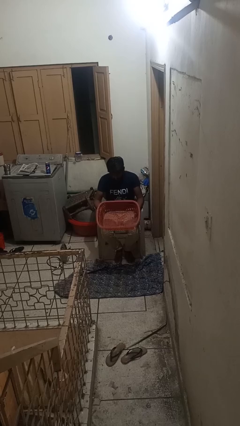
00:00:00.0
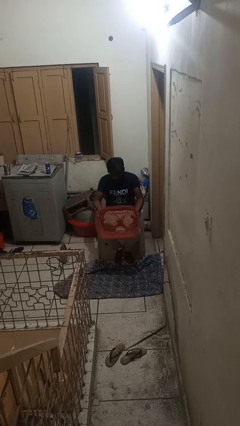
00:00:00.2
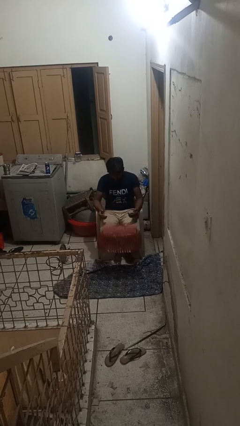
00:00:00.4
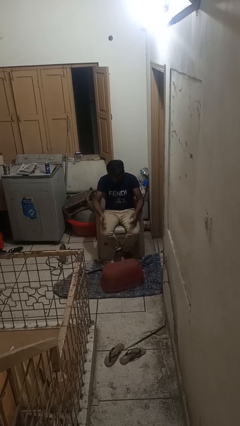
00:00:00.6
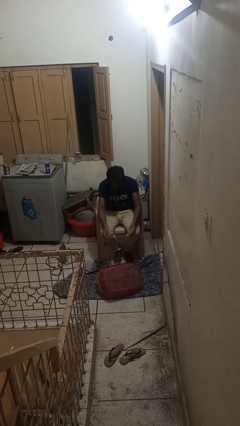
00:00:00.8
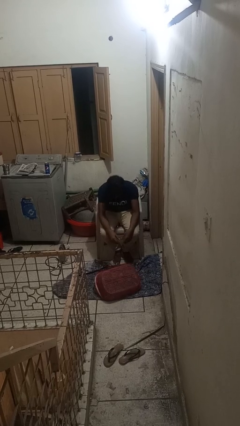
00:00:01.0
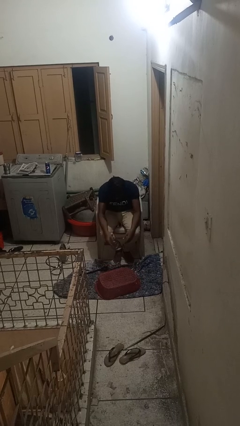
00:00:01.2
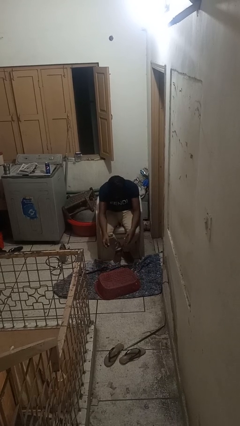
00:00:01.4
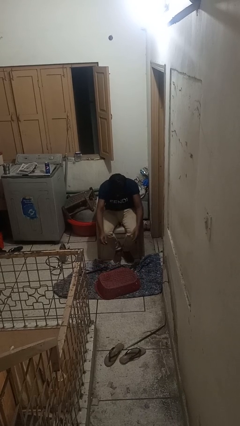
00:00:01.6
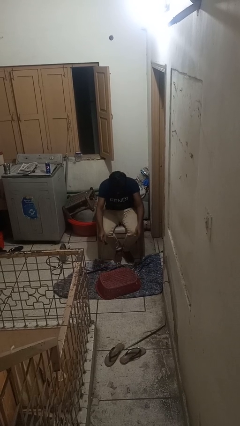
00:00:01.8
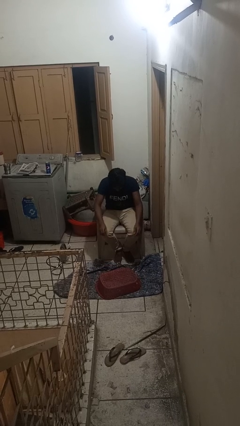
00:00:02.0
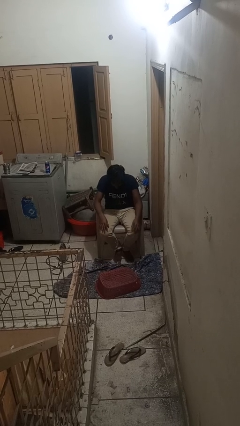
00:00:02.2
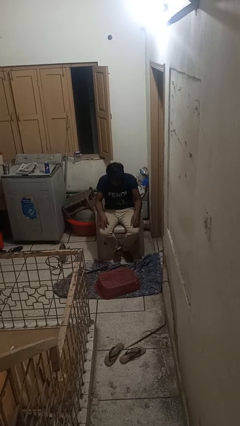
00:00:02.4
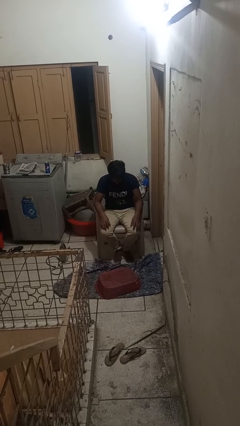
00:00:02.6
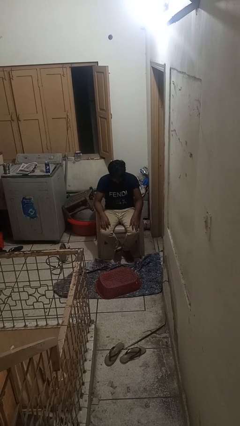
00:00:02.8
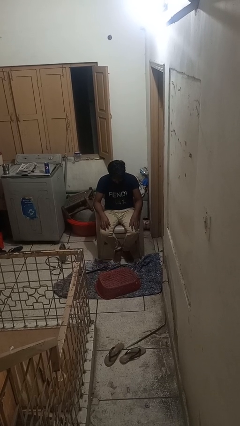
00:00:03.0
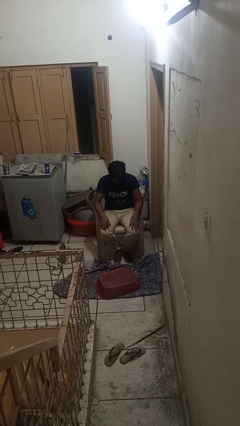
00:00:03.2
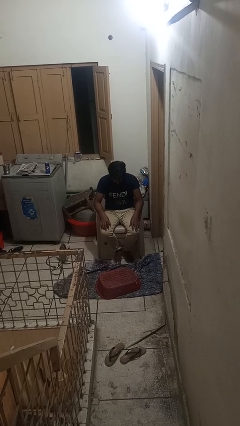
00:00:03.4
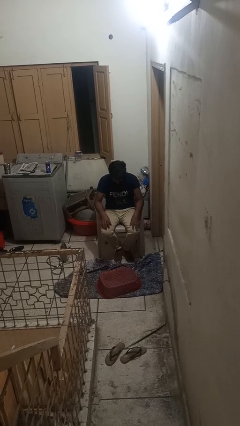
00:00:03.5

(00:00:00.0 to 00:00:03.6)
person drops object

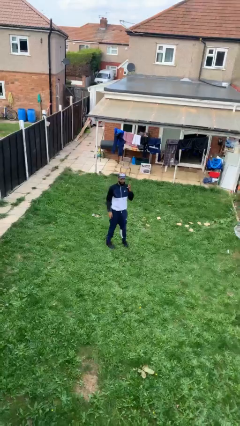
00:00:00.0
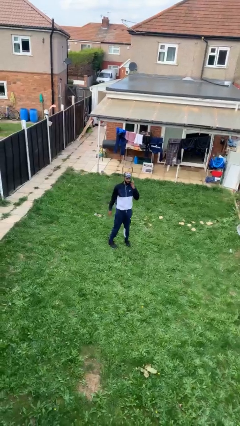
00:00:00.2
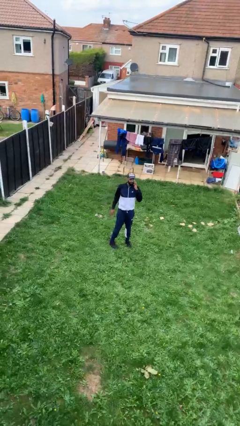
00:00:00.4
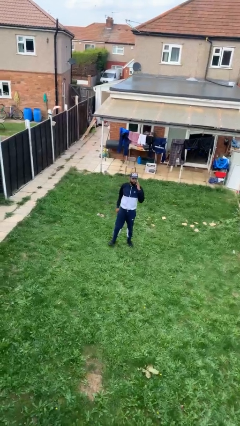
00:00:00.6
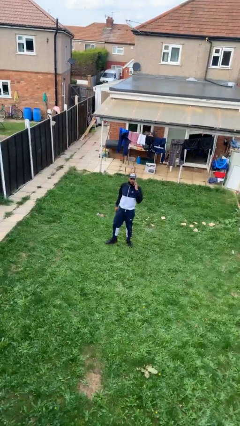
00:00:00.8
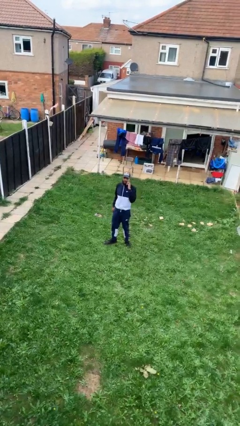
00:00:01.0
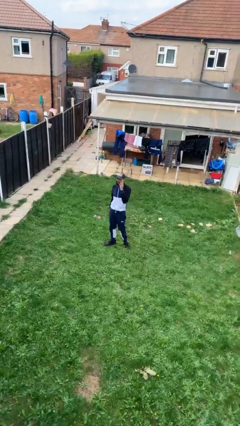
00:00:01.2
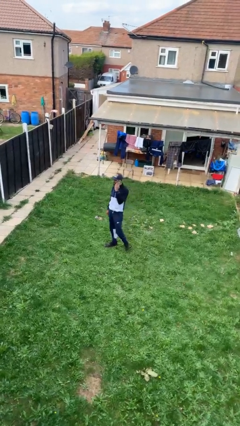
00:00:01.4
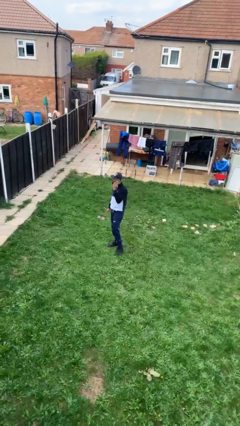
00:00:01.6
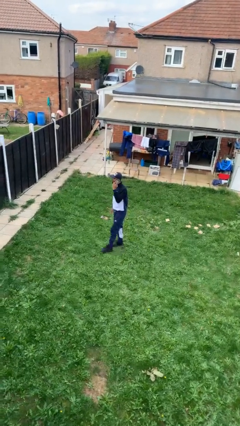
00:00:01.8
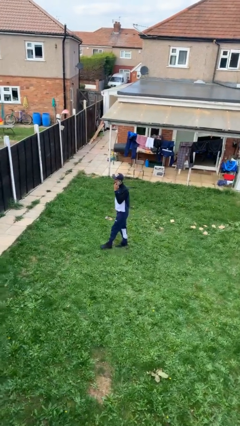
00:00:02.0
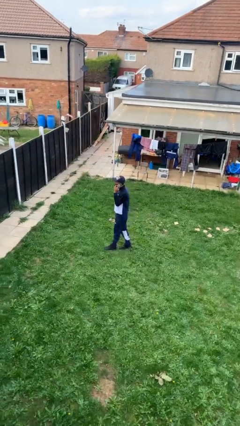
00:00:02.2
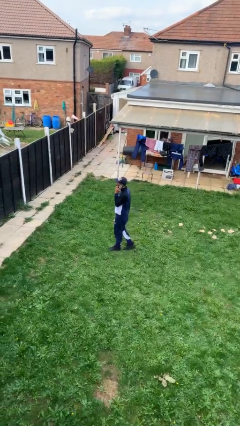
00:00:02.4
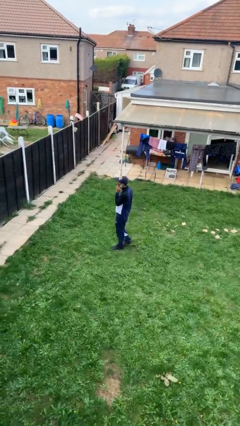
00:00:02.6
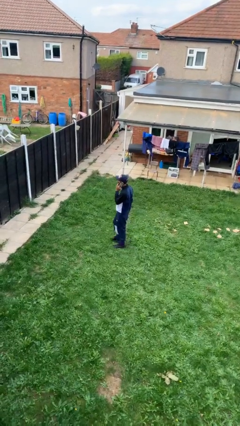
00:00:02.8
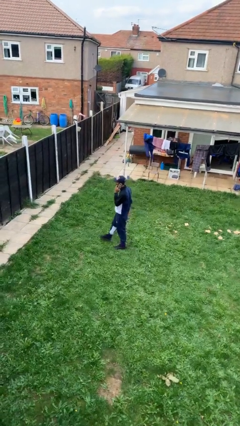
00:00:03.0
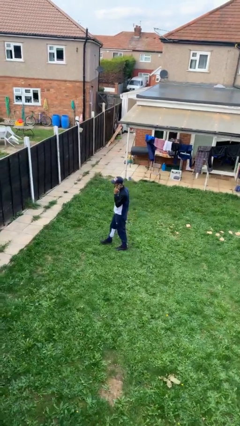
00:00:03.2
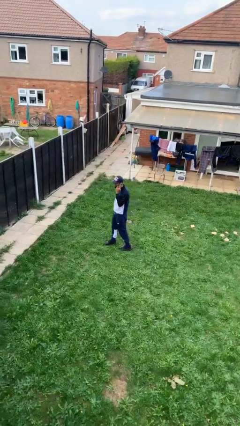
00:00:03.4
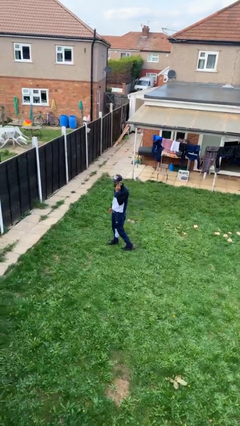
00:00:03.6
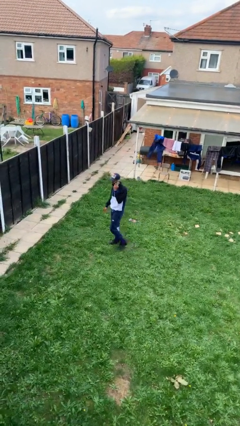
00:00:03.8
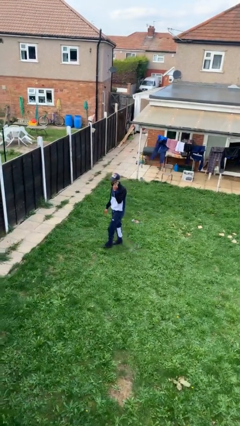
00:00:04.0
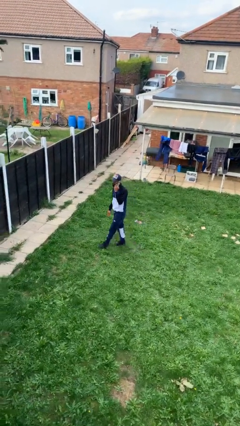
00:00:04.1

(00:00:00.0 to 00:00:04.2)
person talks on phone

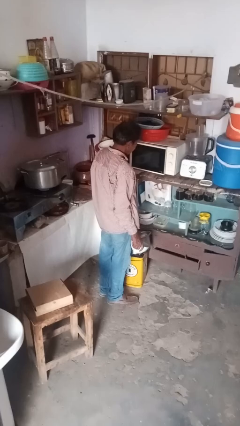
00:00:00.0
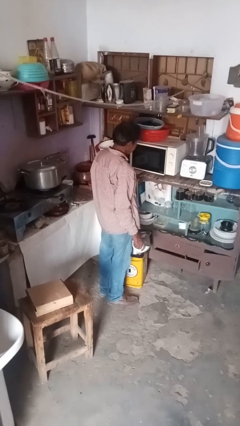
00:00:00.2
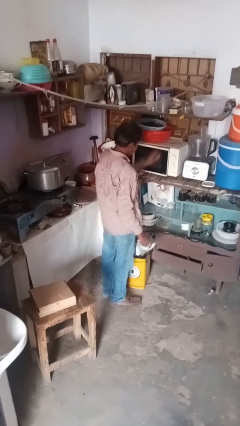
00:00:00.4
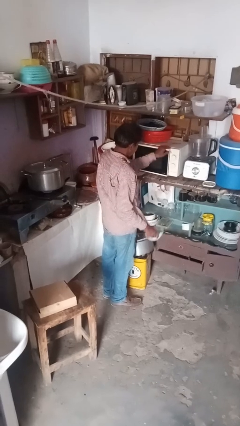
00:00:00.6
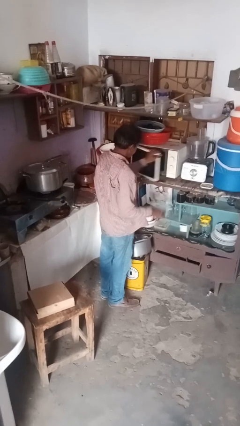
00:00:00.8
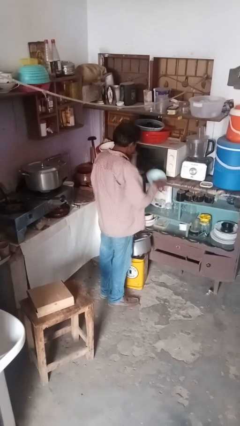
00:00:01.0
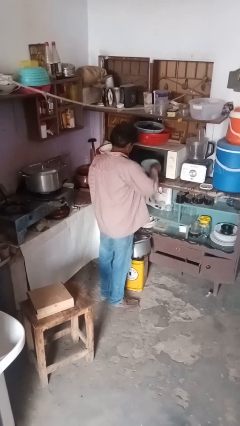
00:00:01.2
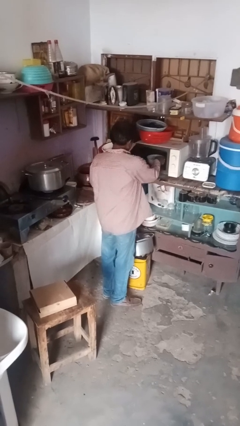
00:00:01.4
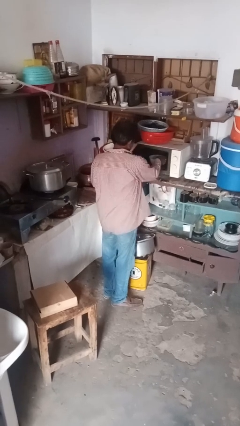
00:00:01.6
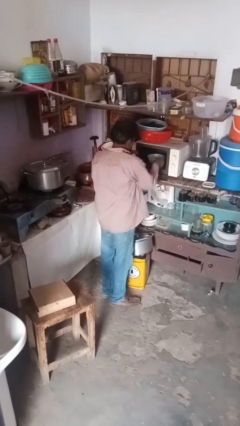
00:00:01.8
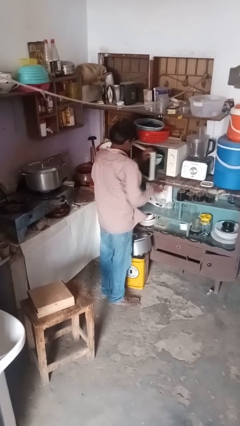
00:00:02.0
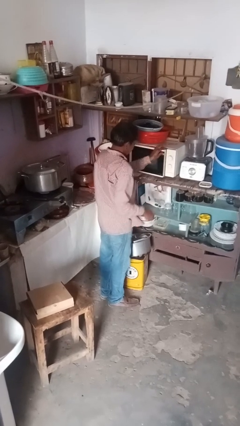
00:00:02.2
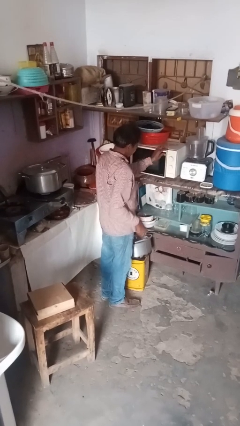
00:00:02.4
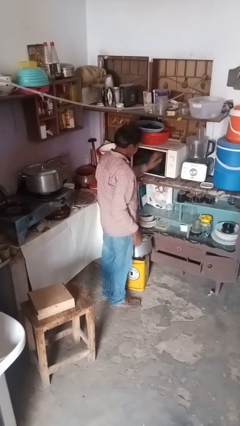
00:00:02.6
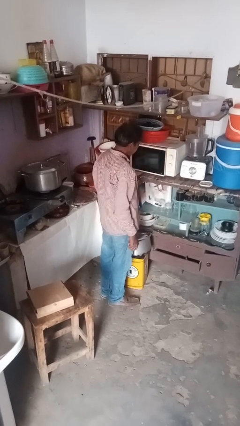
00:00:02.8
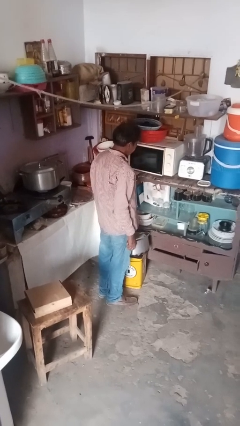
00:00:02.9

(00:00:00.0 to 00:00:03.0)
person puts object into microwave

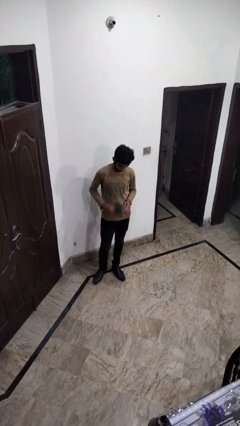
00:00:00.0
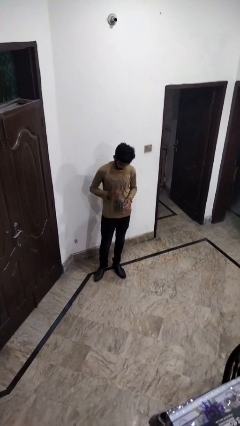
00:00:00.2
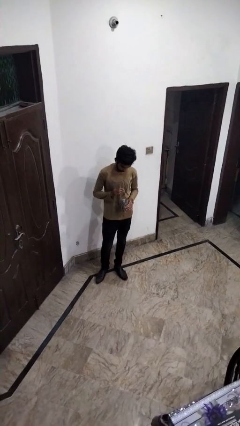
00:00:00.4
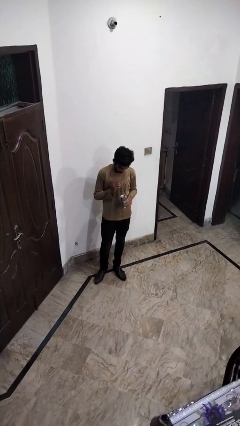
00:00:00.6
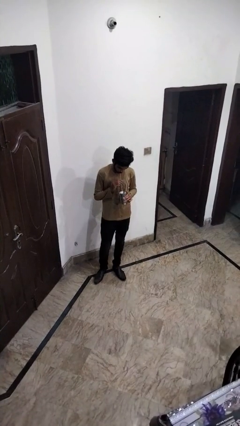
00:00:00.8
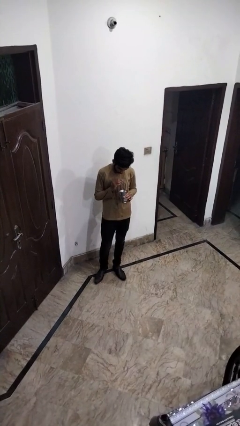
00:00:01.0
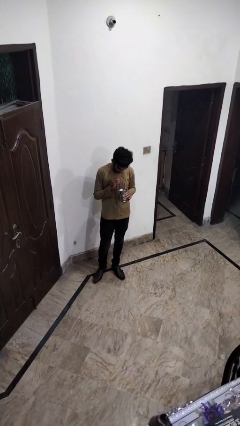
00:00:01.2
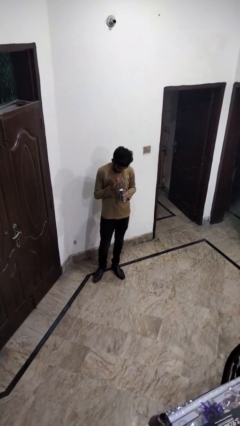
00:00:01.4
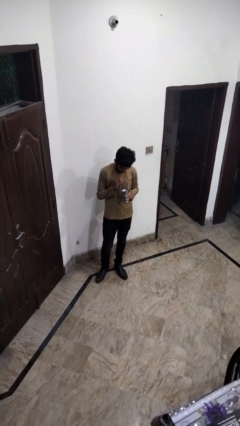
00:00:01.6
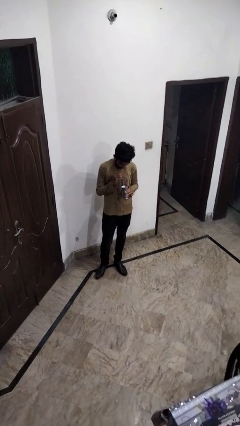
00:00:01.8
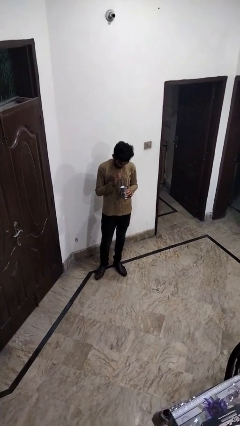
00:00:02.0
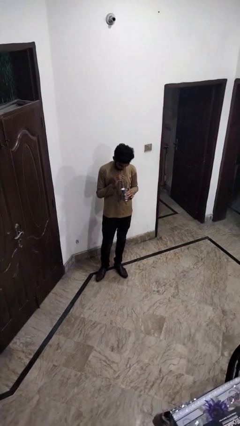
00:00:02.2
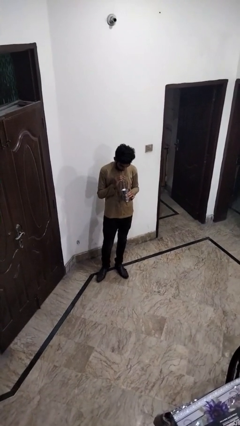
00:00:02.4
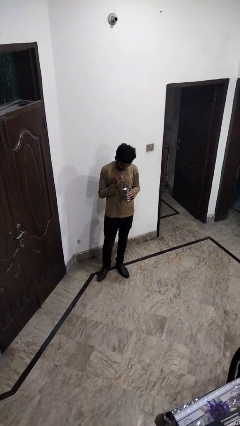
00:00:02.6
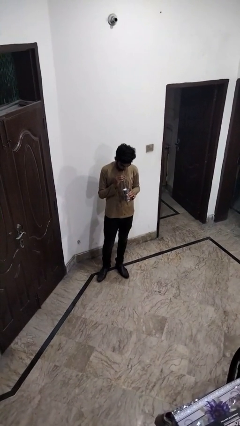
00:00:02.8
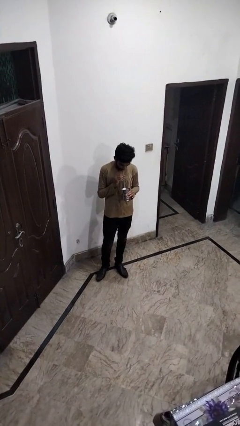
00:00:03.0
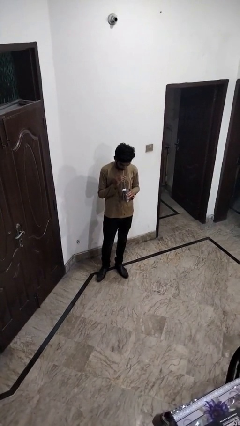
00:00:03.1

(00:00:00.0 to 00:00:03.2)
person drinks from straw

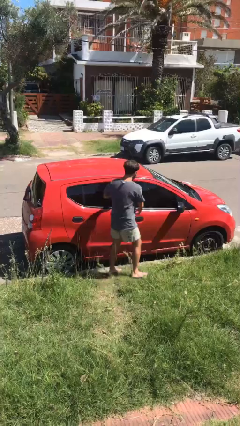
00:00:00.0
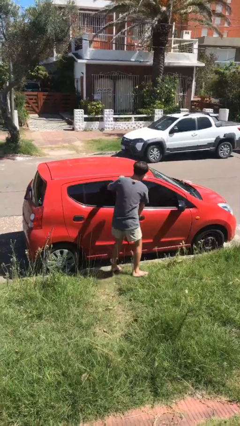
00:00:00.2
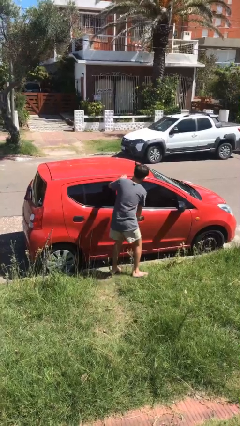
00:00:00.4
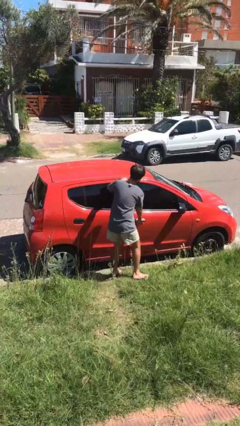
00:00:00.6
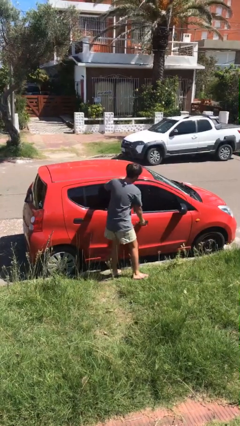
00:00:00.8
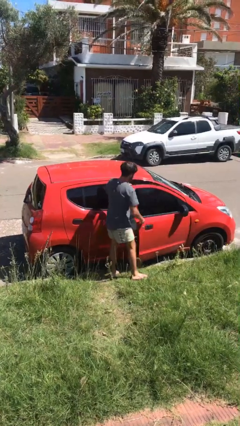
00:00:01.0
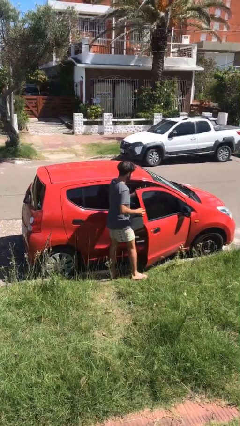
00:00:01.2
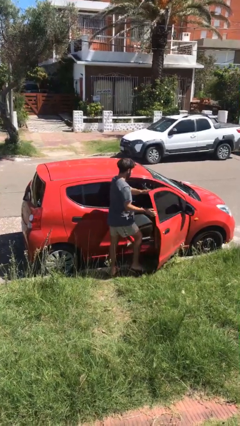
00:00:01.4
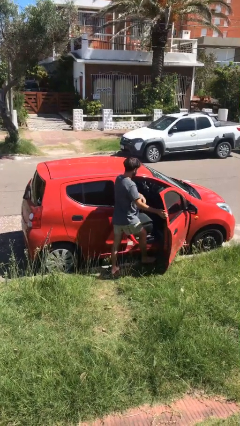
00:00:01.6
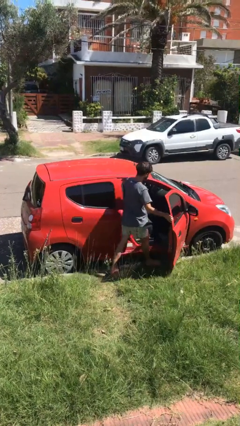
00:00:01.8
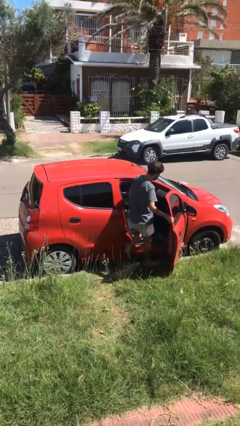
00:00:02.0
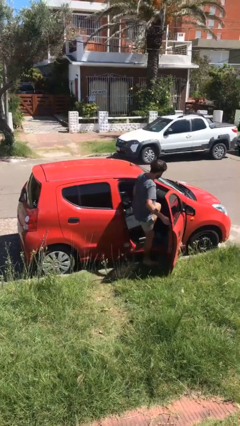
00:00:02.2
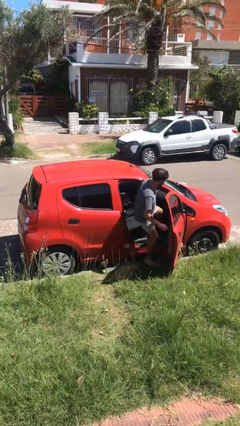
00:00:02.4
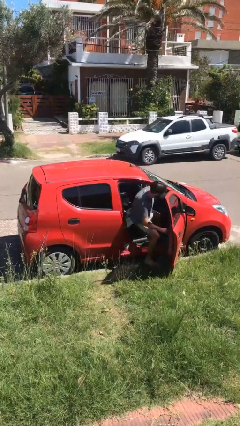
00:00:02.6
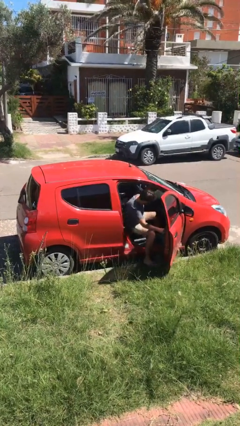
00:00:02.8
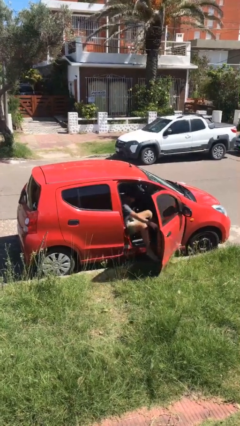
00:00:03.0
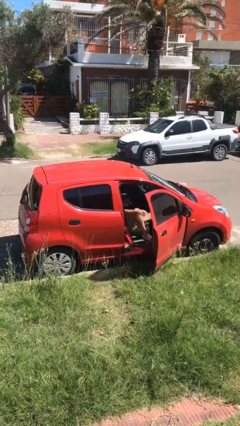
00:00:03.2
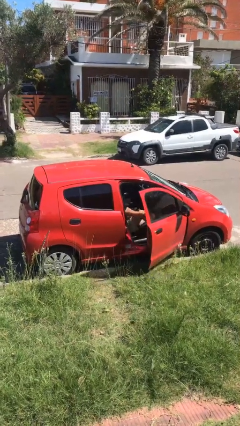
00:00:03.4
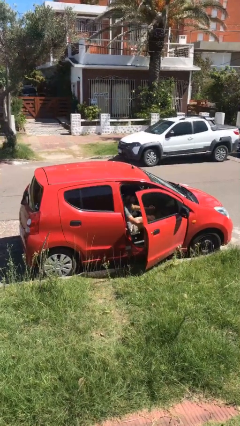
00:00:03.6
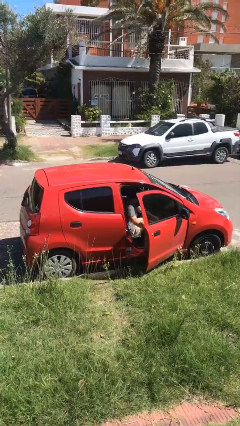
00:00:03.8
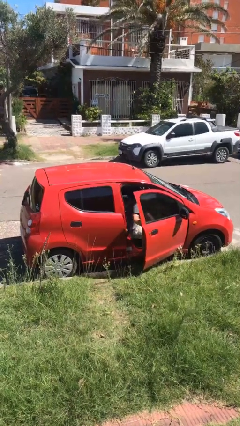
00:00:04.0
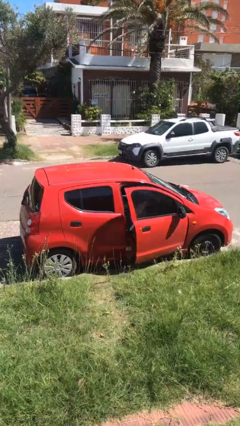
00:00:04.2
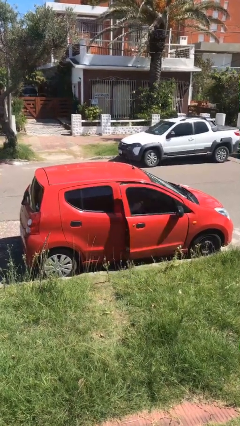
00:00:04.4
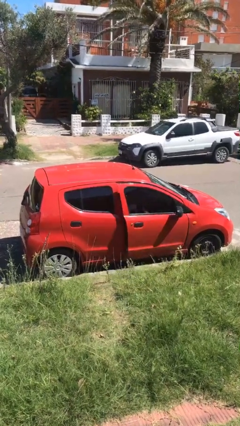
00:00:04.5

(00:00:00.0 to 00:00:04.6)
car picks up person
